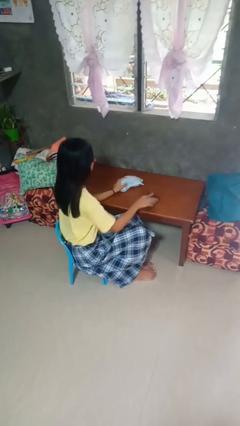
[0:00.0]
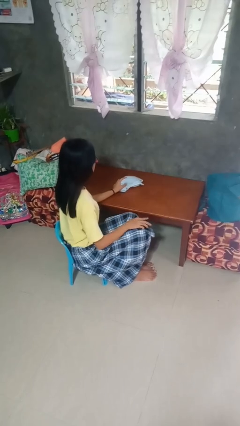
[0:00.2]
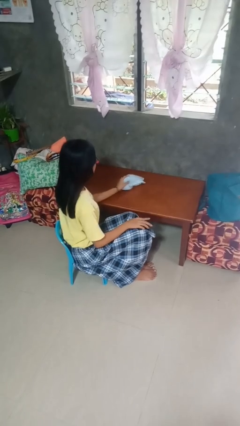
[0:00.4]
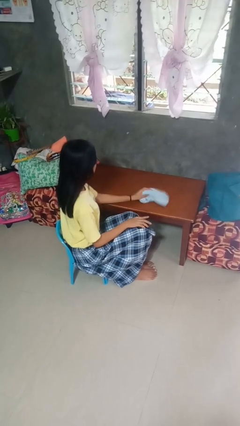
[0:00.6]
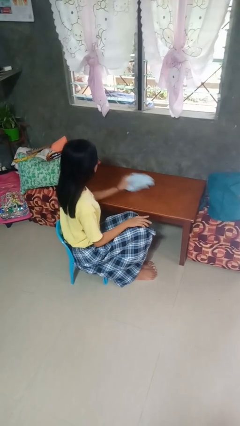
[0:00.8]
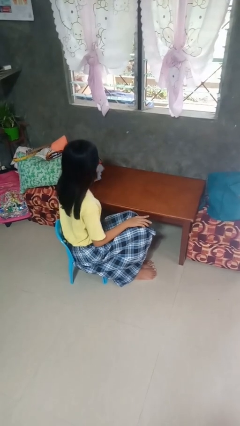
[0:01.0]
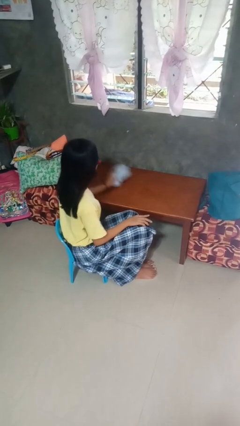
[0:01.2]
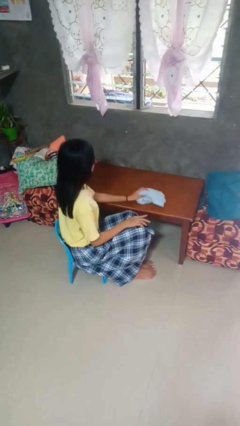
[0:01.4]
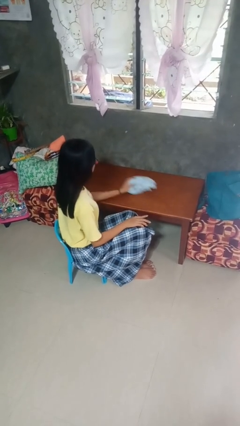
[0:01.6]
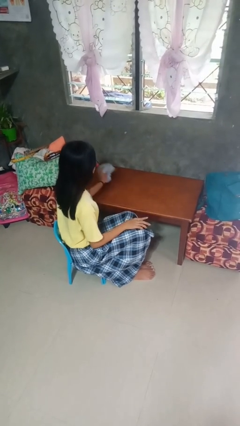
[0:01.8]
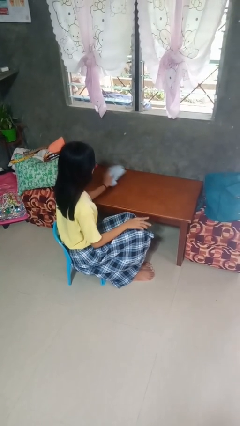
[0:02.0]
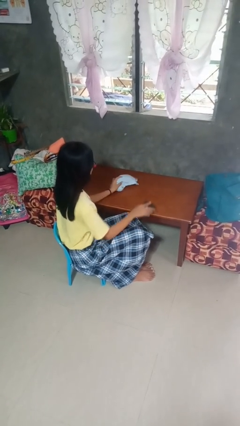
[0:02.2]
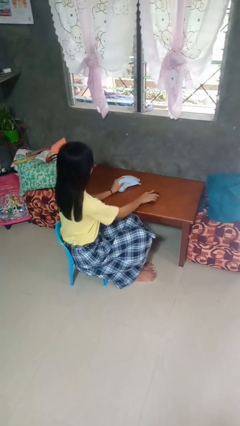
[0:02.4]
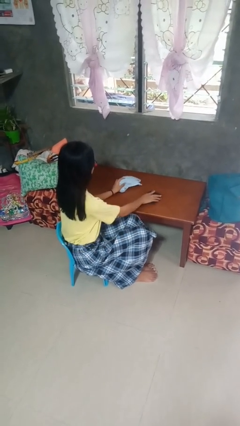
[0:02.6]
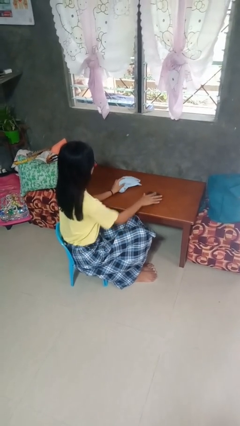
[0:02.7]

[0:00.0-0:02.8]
person cleans table with rag

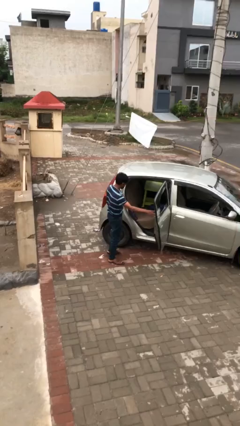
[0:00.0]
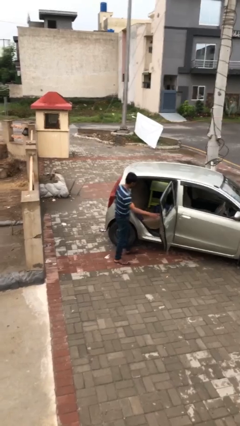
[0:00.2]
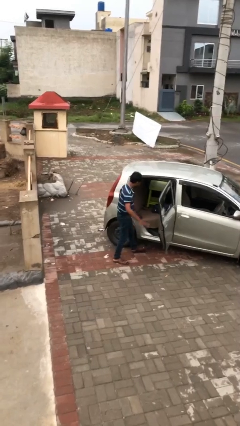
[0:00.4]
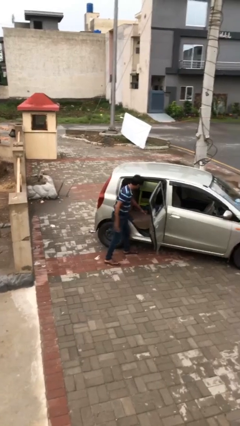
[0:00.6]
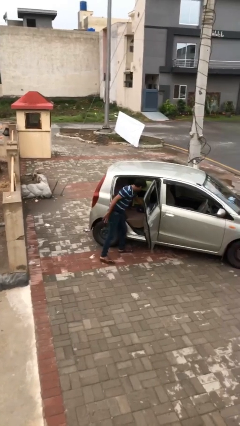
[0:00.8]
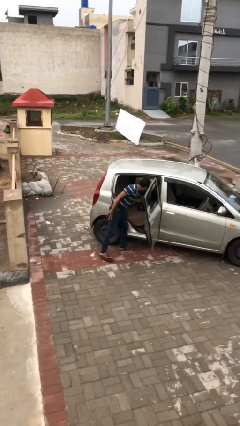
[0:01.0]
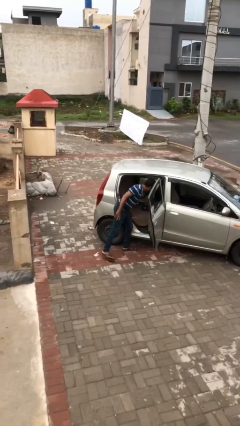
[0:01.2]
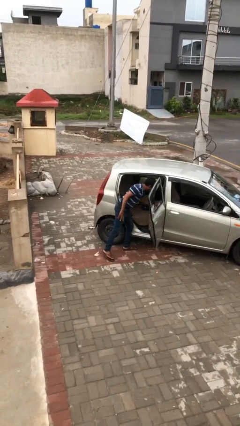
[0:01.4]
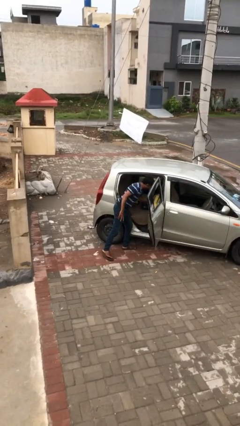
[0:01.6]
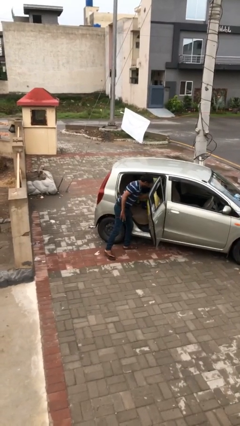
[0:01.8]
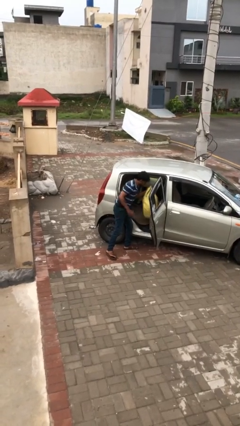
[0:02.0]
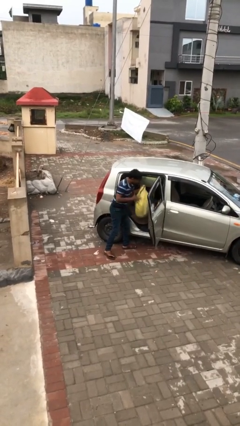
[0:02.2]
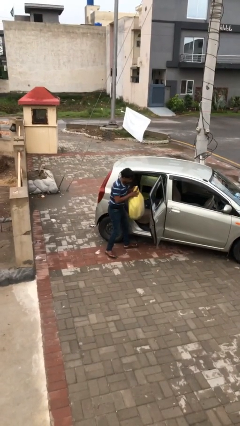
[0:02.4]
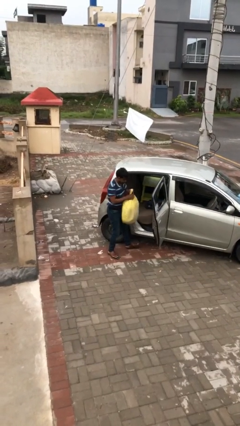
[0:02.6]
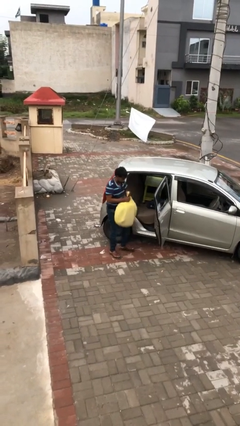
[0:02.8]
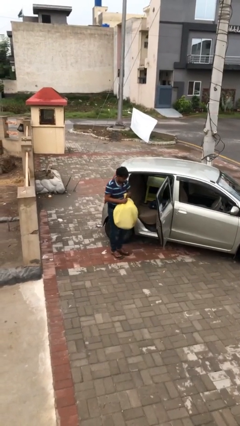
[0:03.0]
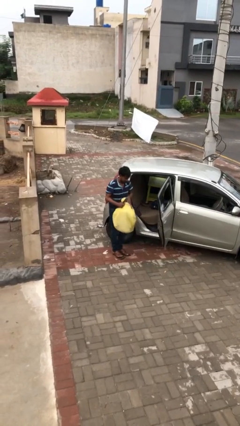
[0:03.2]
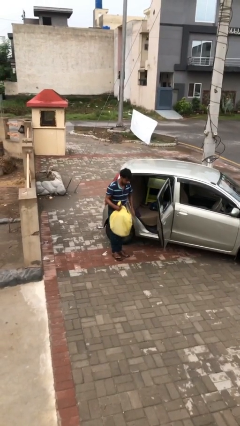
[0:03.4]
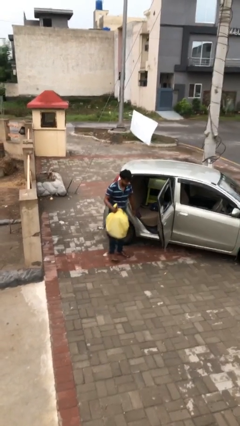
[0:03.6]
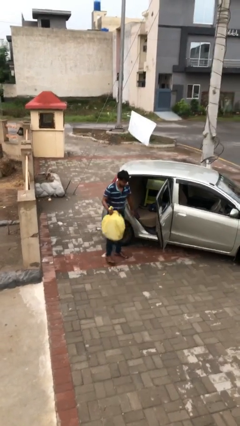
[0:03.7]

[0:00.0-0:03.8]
person unloads car

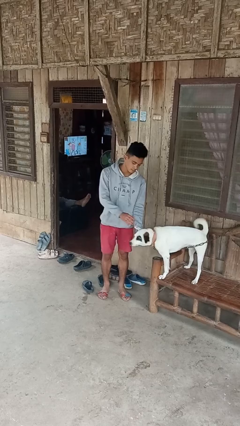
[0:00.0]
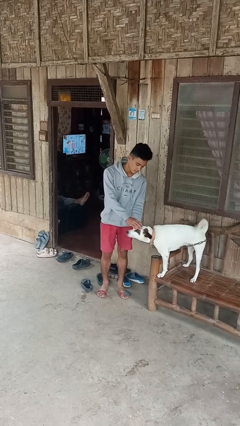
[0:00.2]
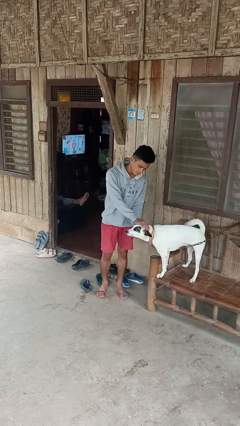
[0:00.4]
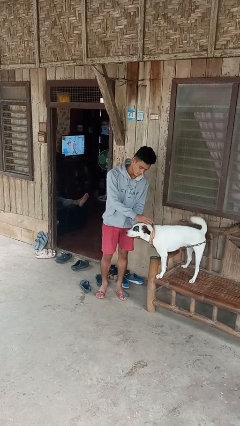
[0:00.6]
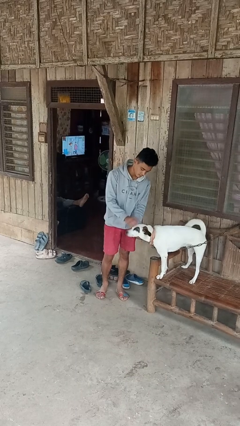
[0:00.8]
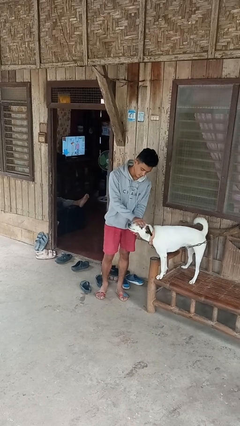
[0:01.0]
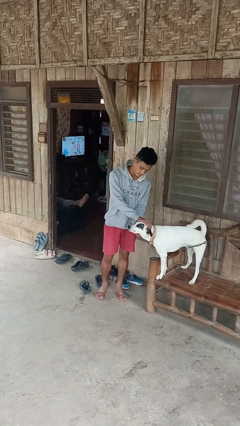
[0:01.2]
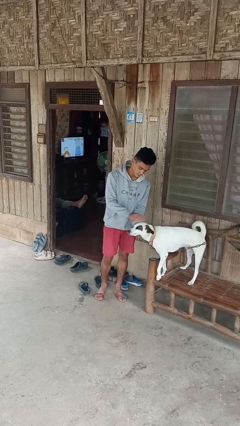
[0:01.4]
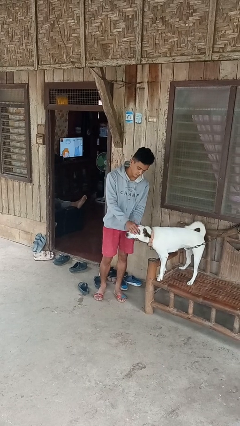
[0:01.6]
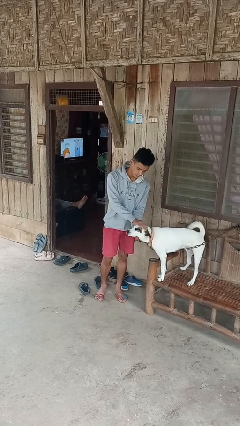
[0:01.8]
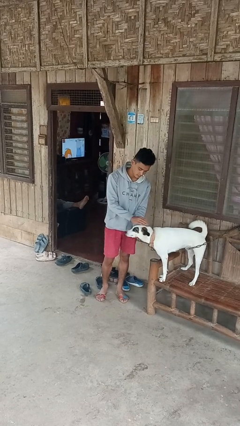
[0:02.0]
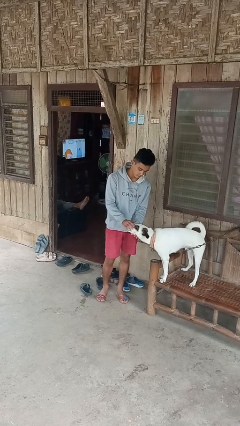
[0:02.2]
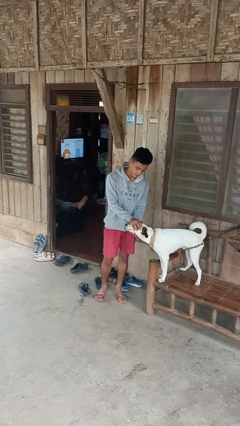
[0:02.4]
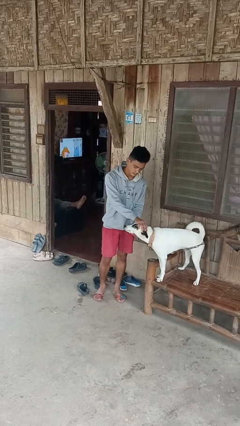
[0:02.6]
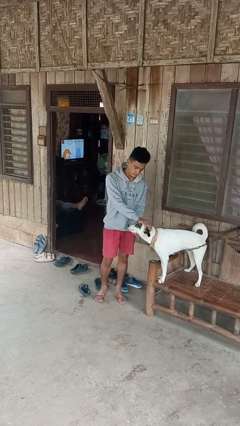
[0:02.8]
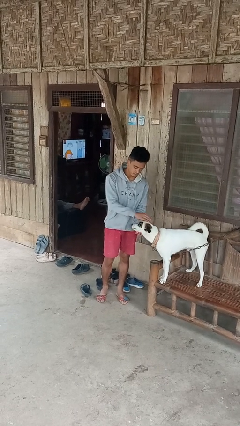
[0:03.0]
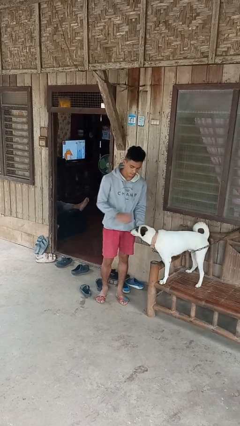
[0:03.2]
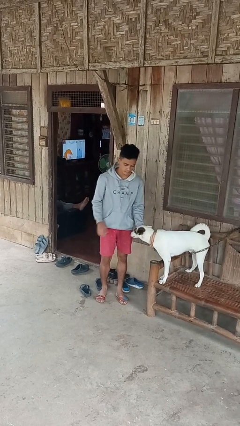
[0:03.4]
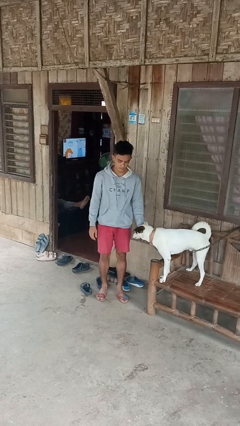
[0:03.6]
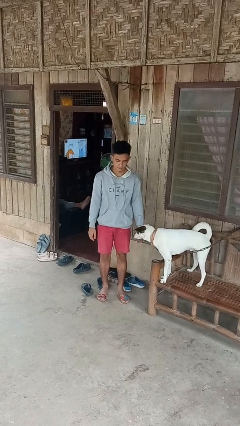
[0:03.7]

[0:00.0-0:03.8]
person pets dog

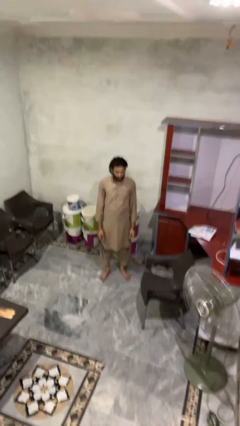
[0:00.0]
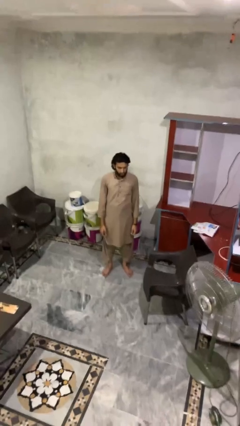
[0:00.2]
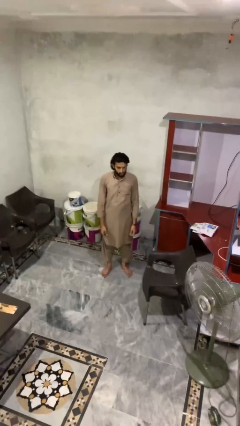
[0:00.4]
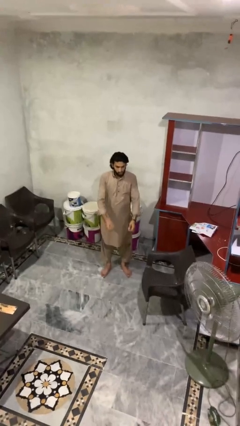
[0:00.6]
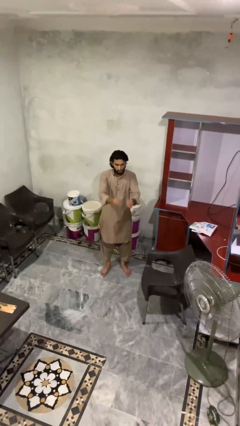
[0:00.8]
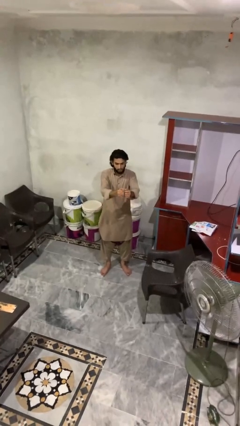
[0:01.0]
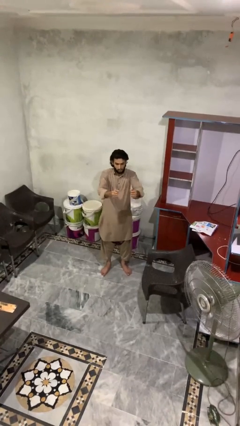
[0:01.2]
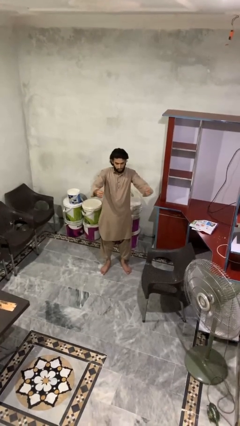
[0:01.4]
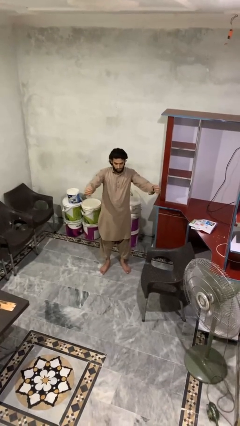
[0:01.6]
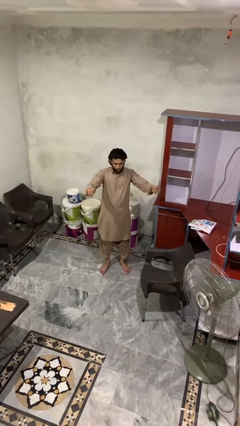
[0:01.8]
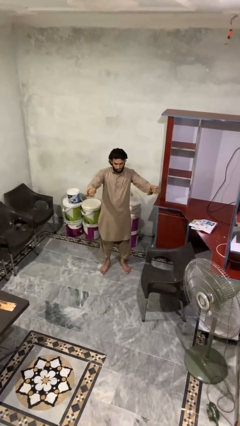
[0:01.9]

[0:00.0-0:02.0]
person gestures zoom in

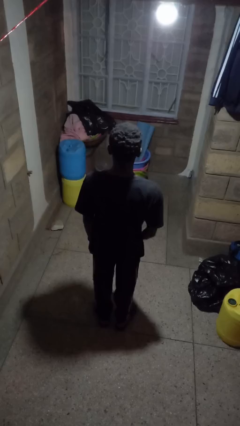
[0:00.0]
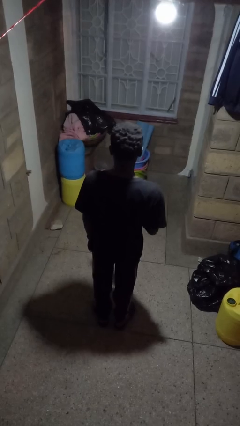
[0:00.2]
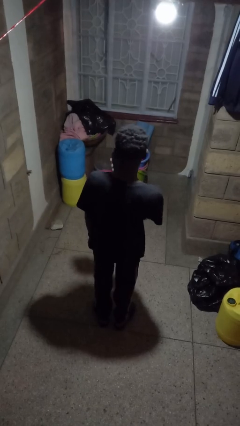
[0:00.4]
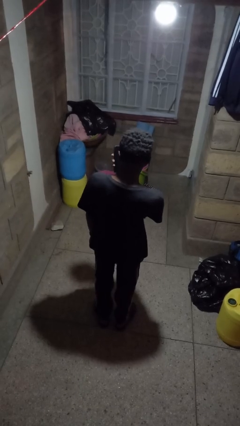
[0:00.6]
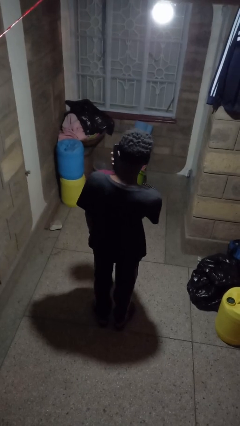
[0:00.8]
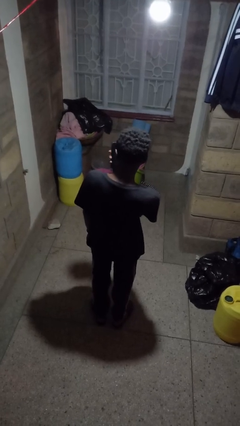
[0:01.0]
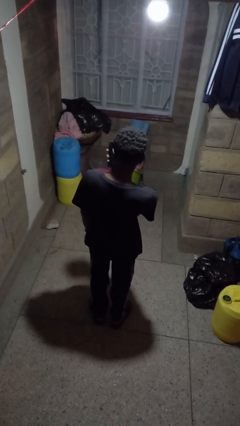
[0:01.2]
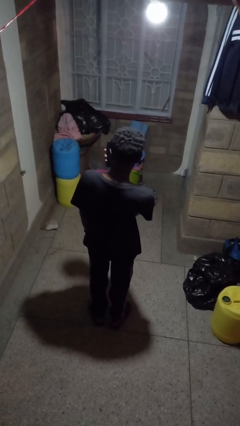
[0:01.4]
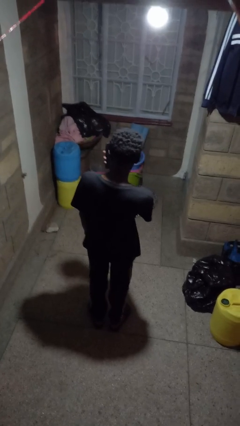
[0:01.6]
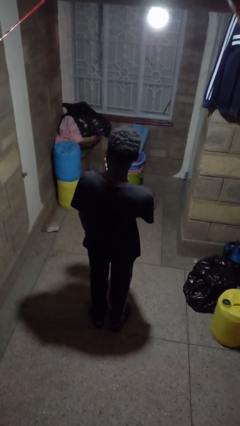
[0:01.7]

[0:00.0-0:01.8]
person takes selfie

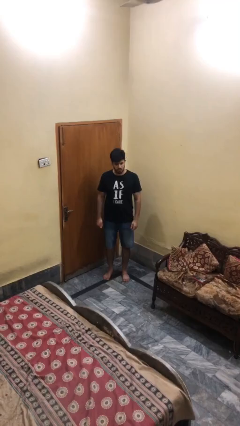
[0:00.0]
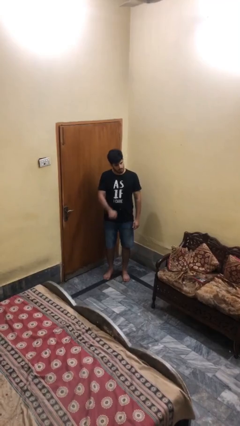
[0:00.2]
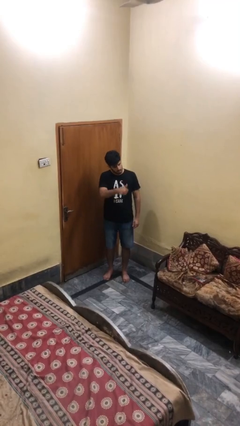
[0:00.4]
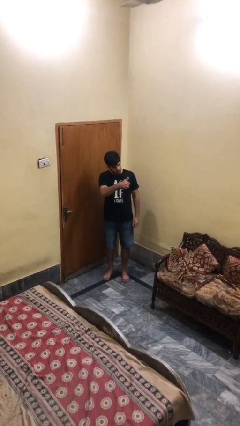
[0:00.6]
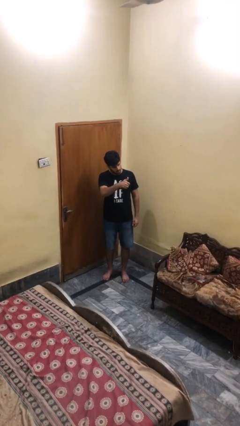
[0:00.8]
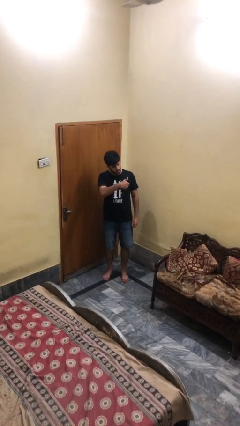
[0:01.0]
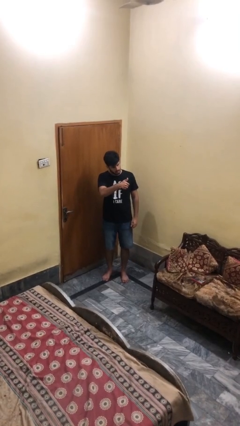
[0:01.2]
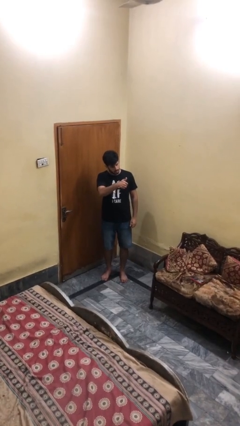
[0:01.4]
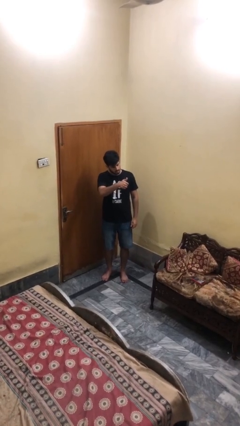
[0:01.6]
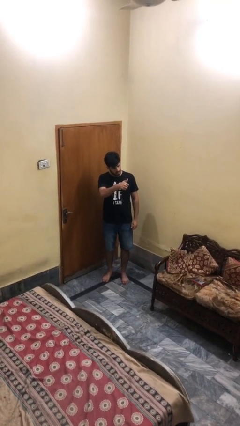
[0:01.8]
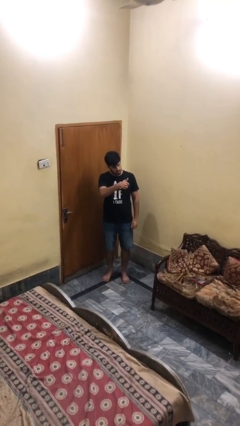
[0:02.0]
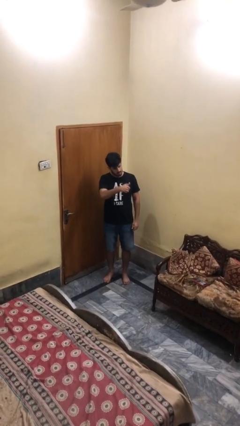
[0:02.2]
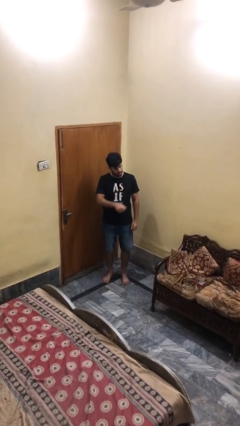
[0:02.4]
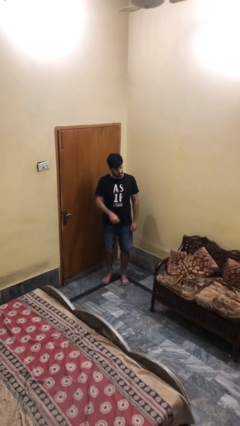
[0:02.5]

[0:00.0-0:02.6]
person gestures thumbs up

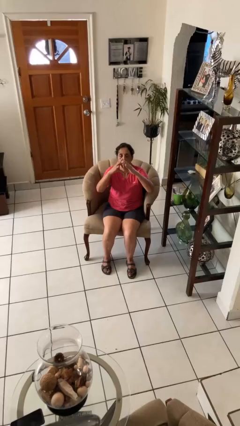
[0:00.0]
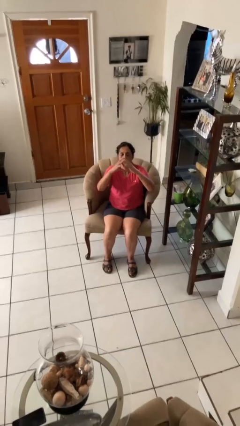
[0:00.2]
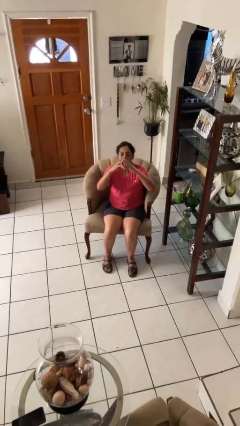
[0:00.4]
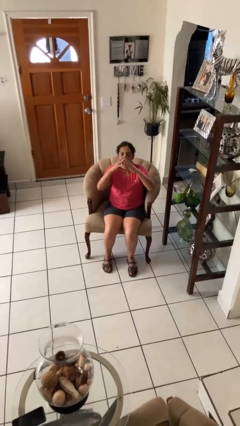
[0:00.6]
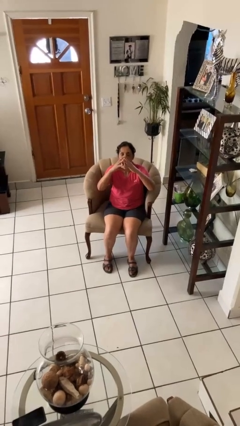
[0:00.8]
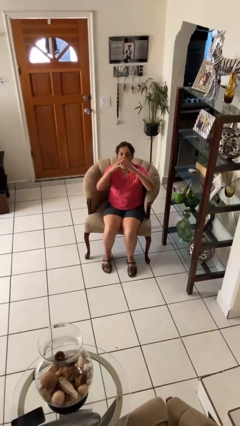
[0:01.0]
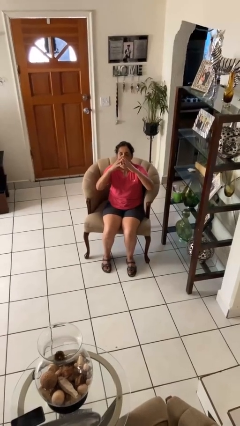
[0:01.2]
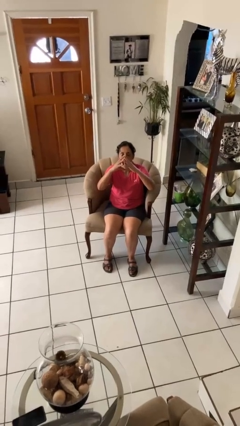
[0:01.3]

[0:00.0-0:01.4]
person gestures heart
